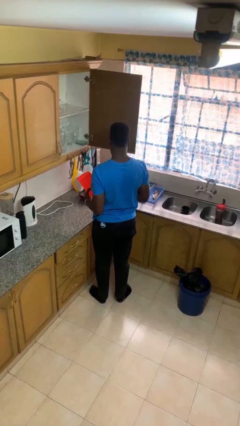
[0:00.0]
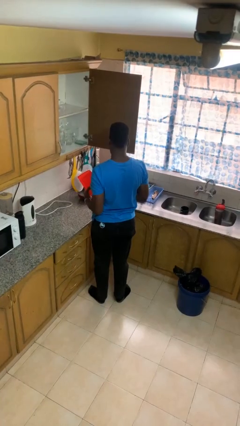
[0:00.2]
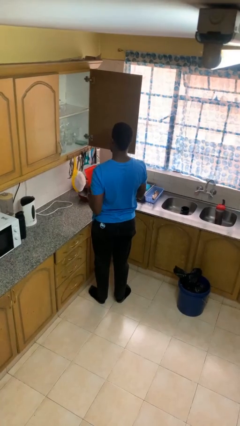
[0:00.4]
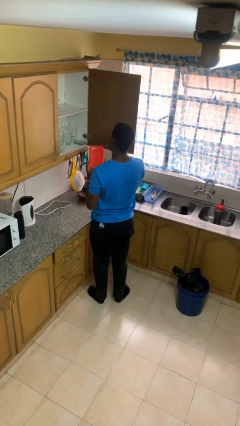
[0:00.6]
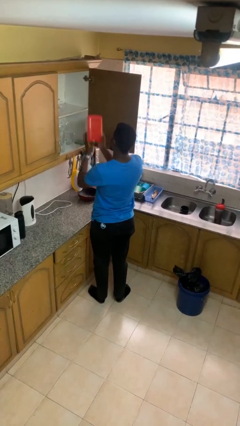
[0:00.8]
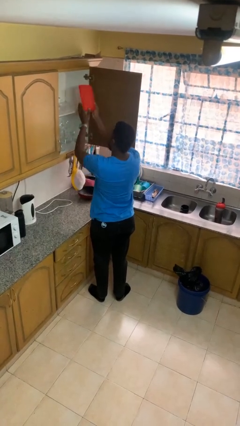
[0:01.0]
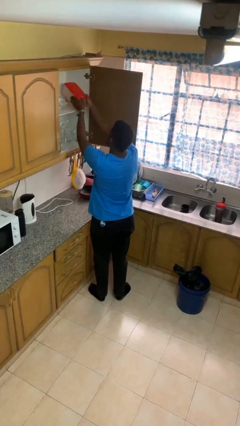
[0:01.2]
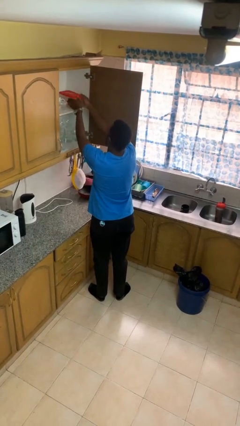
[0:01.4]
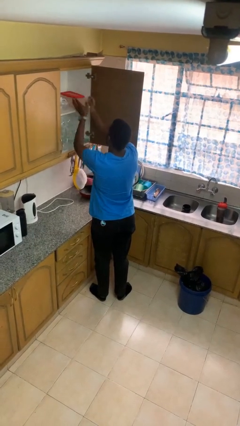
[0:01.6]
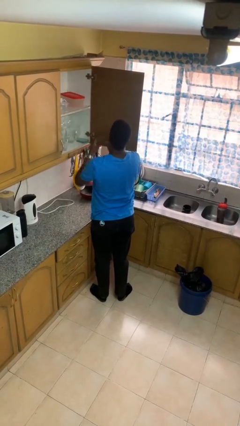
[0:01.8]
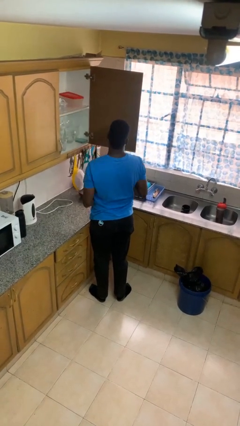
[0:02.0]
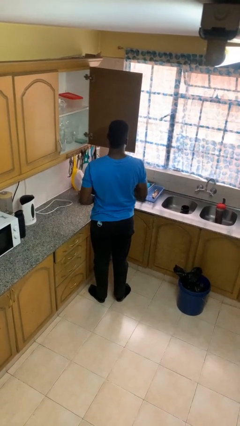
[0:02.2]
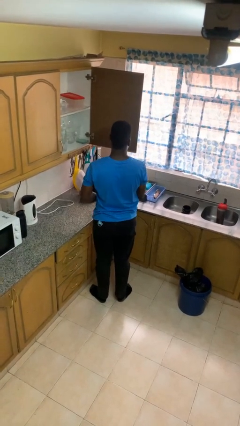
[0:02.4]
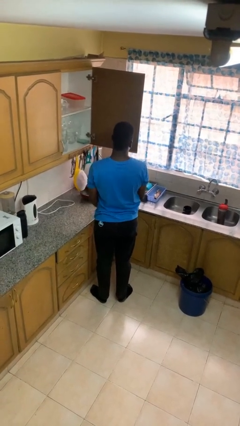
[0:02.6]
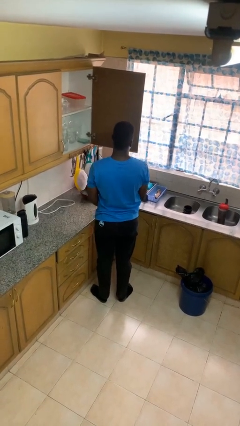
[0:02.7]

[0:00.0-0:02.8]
person puts down object into cabinet

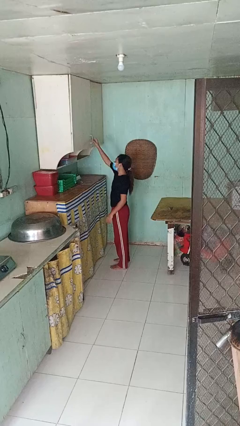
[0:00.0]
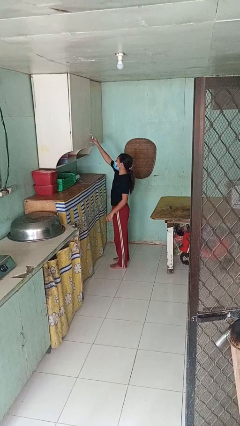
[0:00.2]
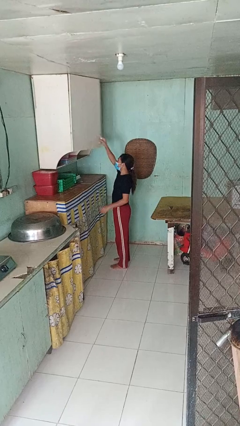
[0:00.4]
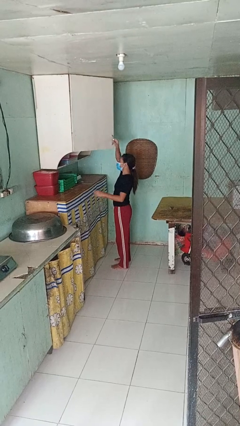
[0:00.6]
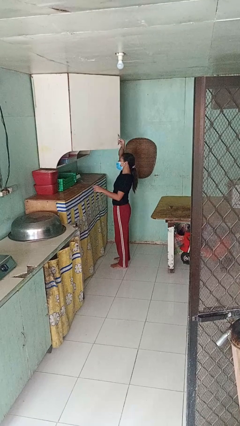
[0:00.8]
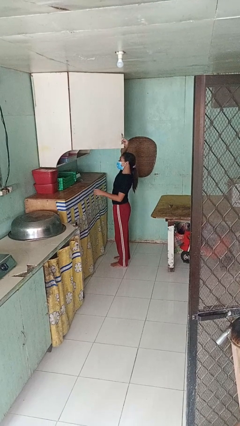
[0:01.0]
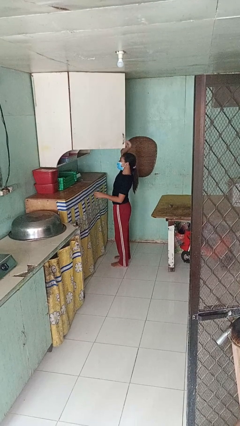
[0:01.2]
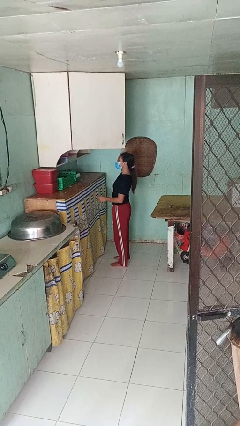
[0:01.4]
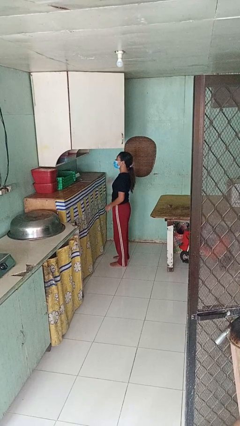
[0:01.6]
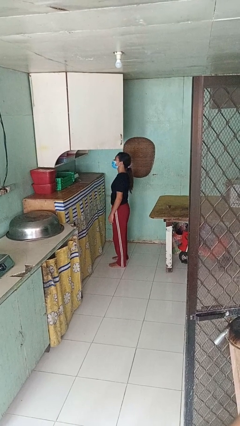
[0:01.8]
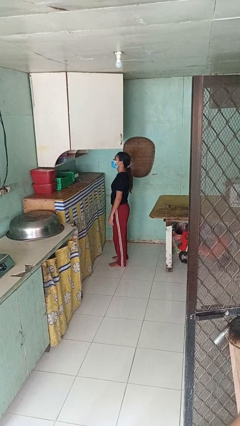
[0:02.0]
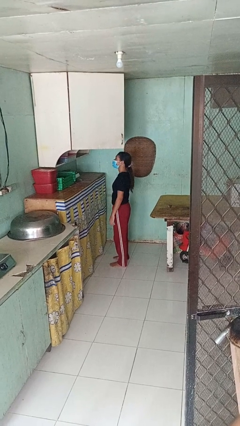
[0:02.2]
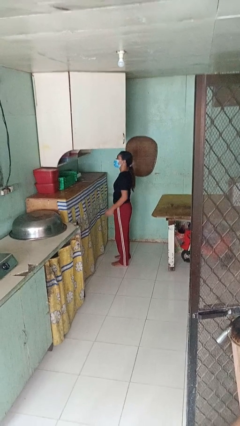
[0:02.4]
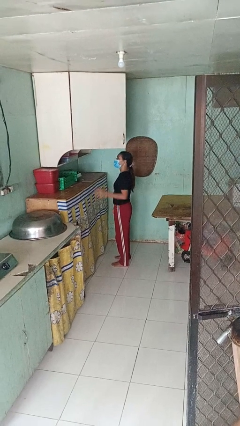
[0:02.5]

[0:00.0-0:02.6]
person opens cabinet

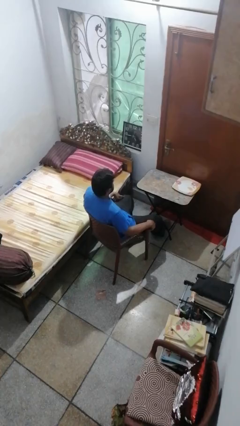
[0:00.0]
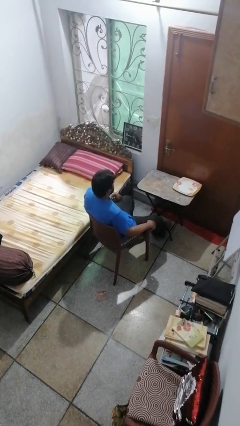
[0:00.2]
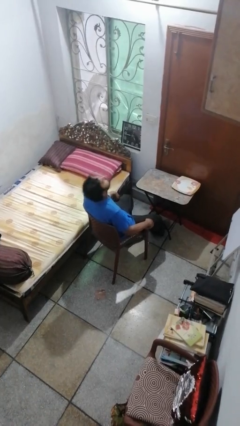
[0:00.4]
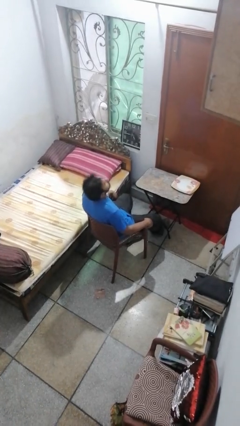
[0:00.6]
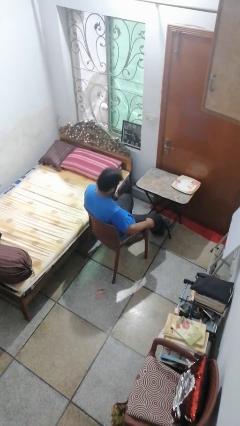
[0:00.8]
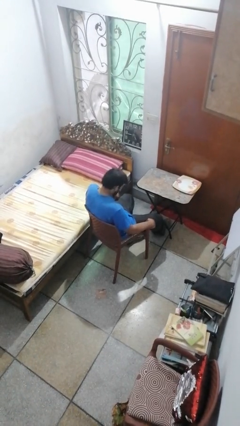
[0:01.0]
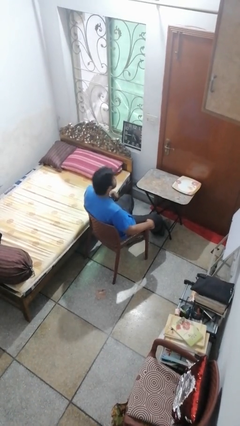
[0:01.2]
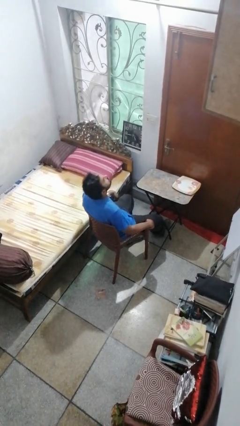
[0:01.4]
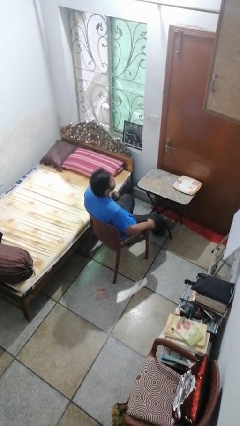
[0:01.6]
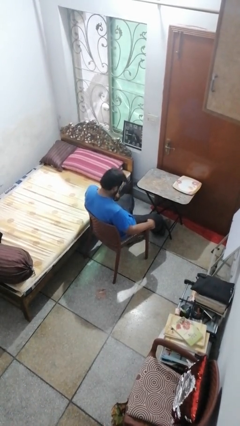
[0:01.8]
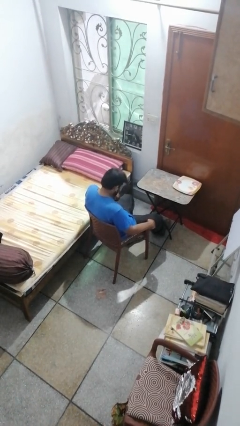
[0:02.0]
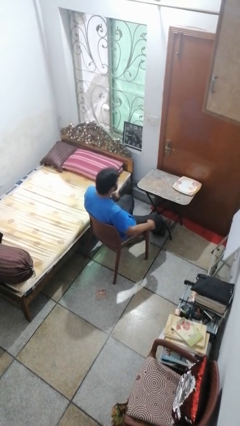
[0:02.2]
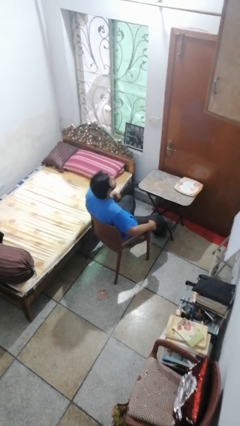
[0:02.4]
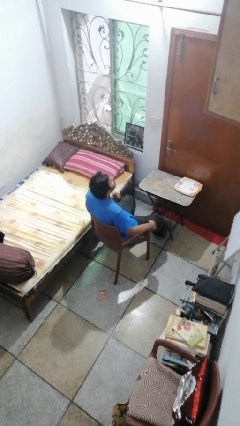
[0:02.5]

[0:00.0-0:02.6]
person nods head

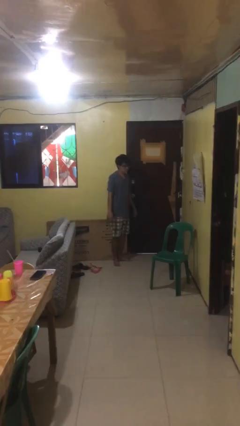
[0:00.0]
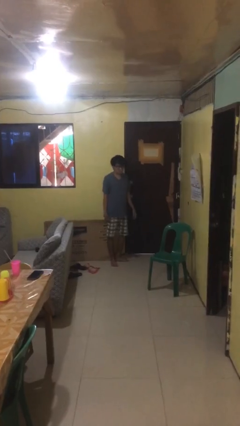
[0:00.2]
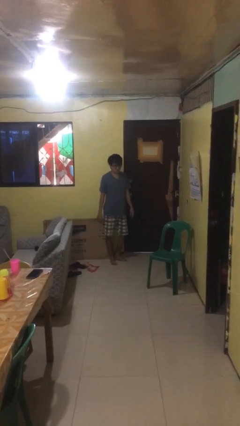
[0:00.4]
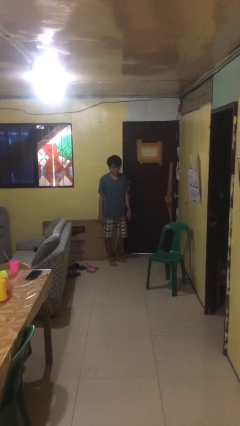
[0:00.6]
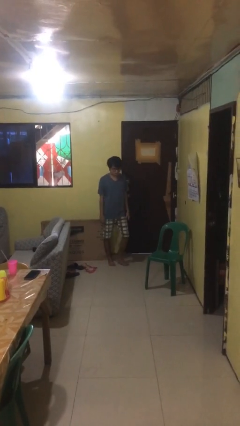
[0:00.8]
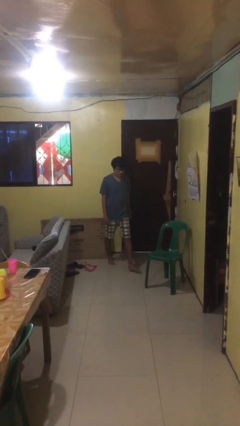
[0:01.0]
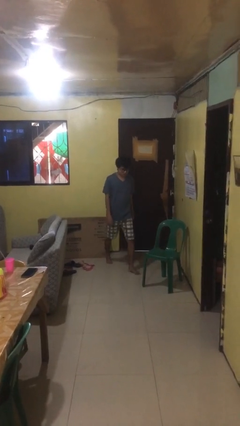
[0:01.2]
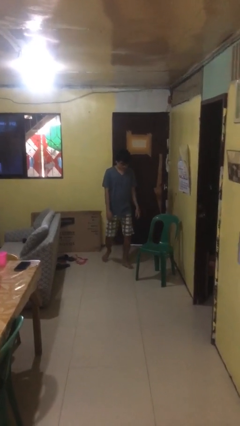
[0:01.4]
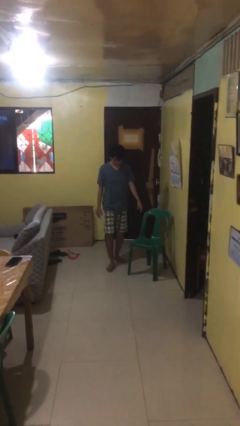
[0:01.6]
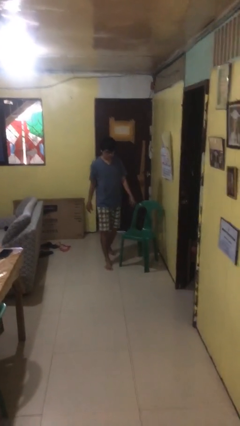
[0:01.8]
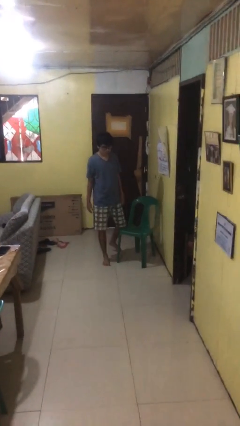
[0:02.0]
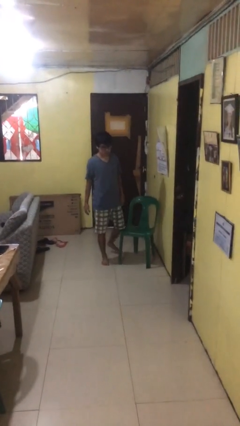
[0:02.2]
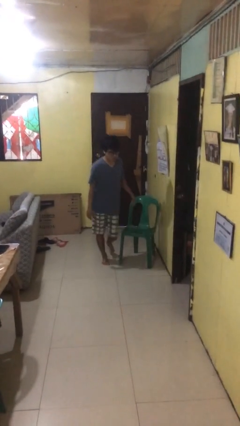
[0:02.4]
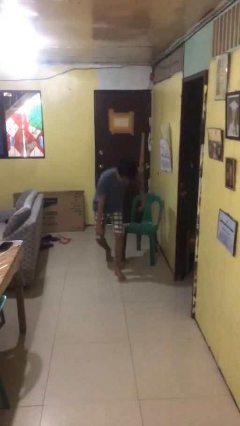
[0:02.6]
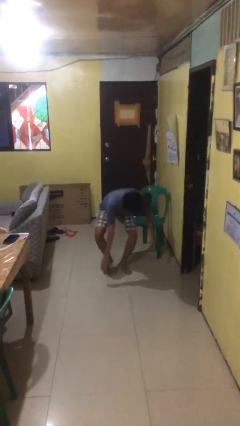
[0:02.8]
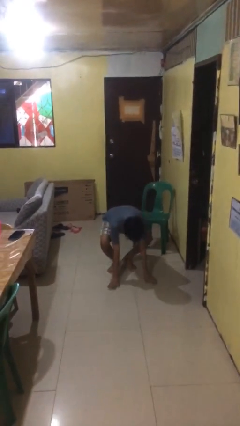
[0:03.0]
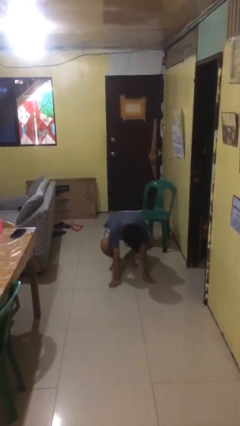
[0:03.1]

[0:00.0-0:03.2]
person trips on object on floor

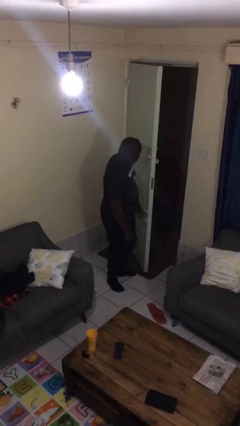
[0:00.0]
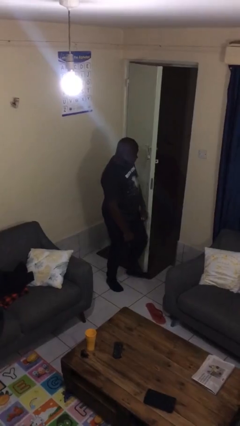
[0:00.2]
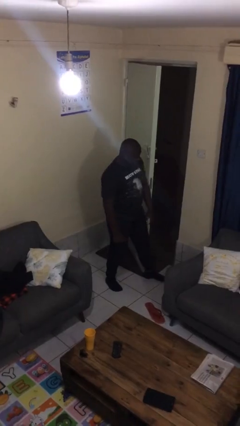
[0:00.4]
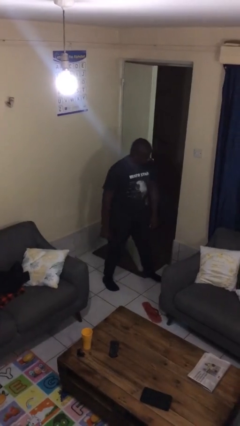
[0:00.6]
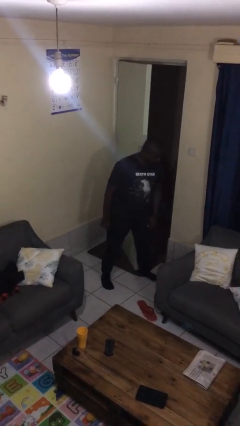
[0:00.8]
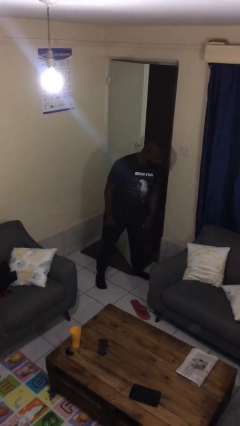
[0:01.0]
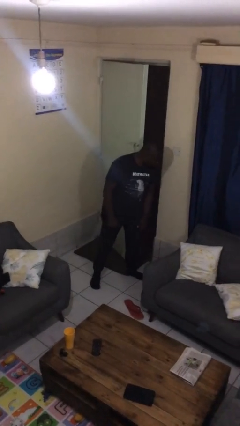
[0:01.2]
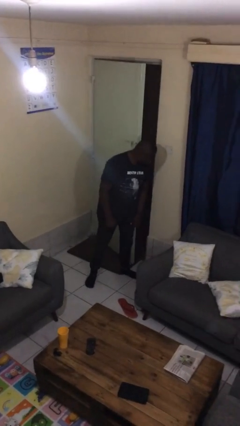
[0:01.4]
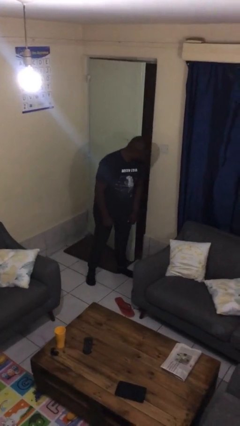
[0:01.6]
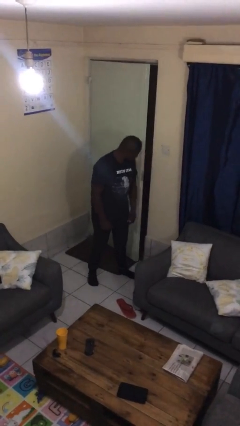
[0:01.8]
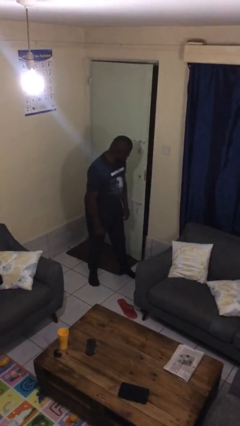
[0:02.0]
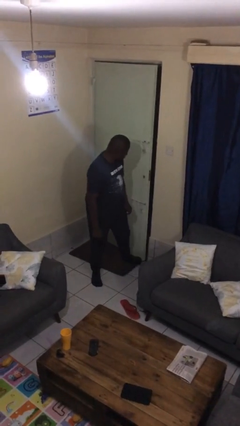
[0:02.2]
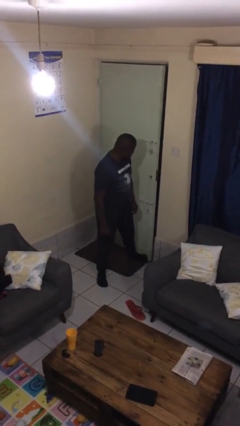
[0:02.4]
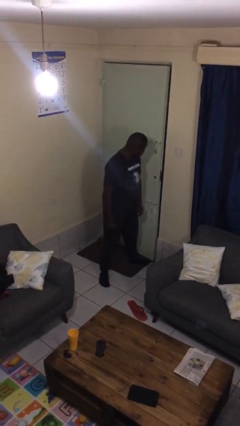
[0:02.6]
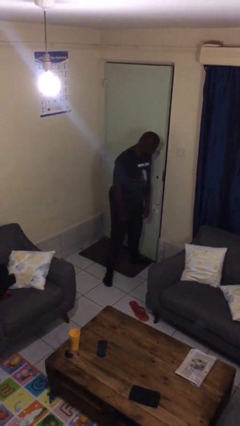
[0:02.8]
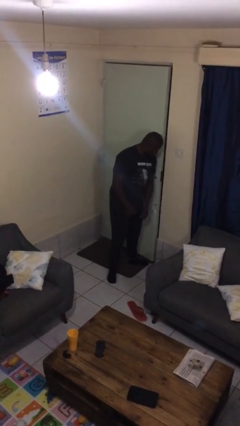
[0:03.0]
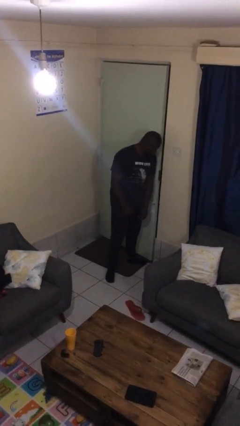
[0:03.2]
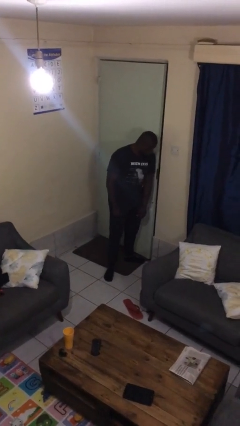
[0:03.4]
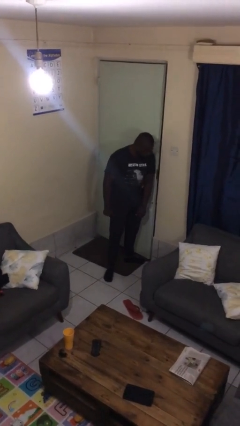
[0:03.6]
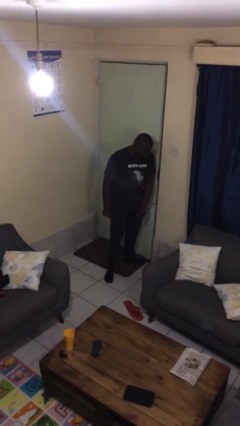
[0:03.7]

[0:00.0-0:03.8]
person closes door with hip

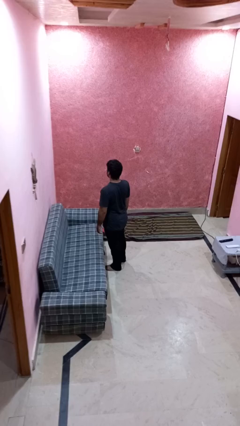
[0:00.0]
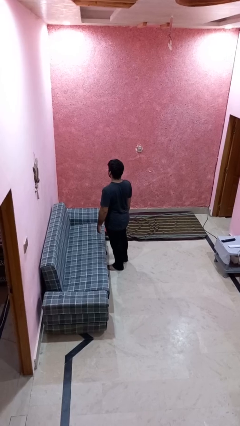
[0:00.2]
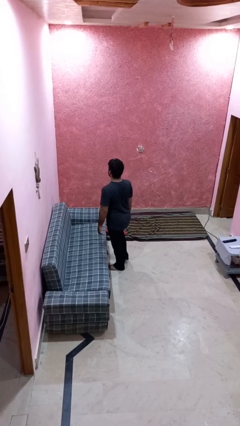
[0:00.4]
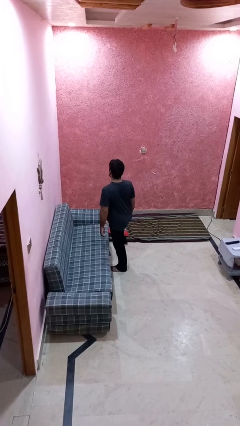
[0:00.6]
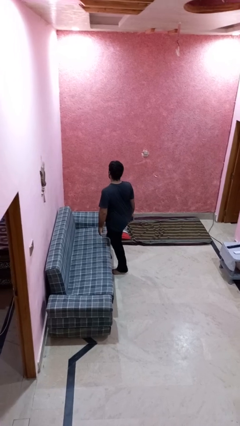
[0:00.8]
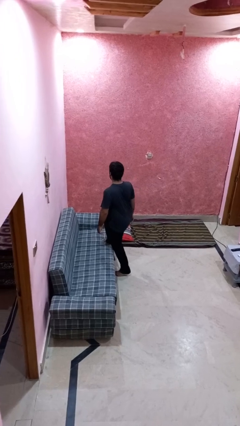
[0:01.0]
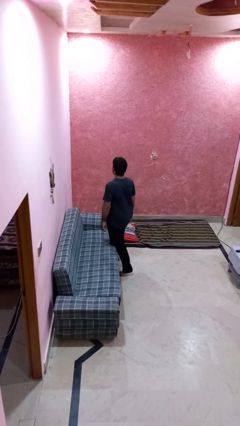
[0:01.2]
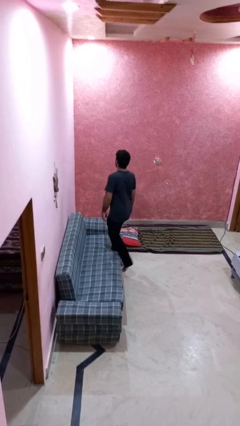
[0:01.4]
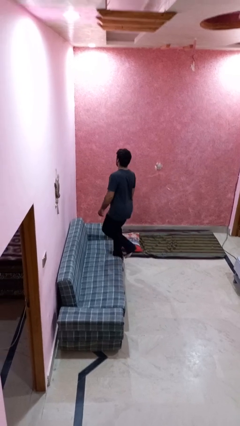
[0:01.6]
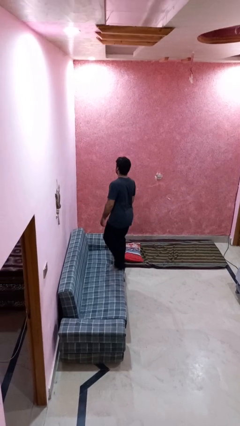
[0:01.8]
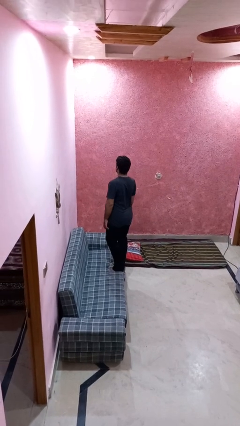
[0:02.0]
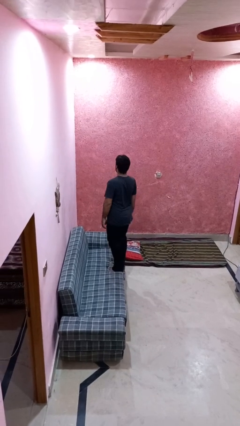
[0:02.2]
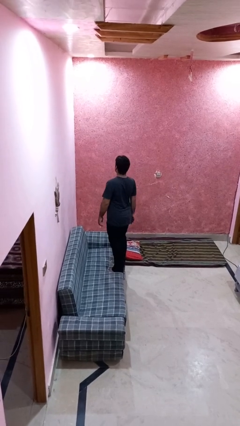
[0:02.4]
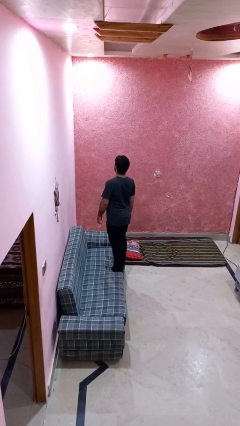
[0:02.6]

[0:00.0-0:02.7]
person climbs on couch
